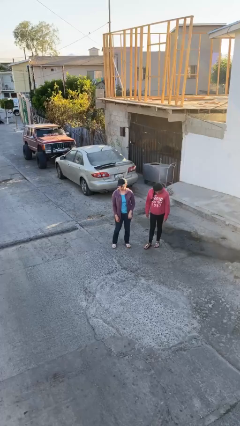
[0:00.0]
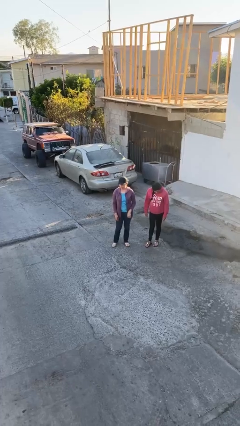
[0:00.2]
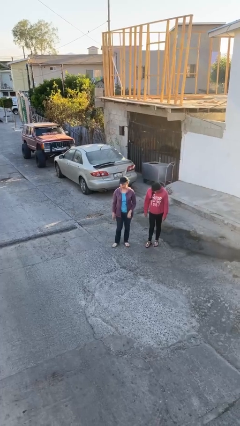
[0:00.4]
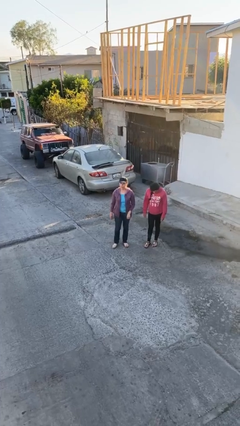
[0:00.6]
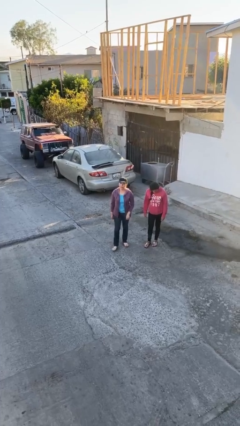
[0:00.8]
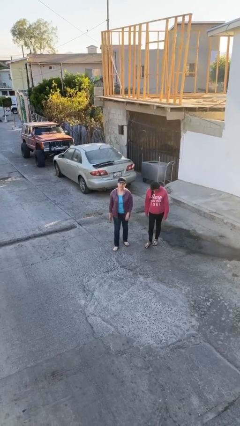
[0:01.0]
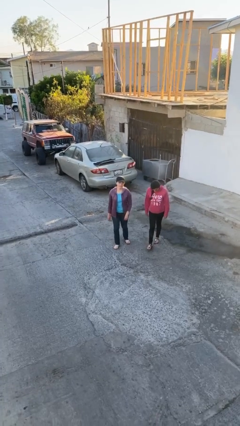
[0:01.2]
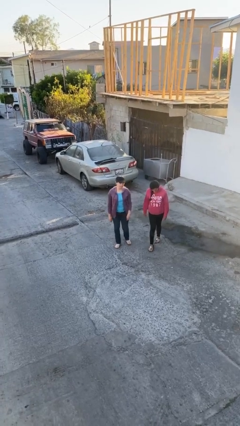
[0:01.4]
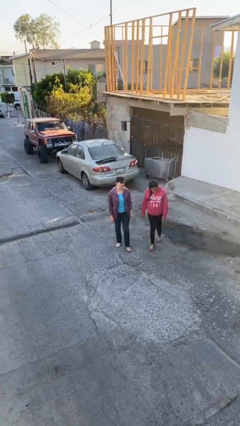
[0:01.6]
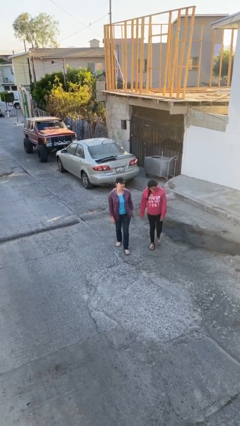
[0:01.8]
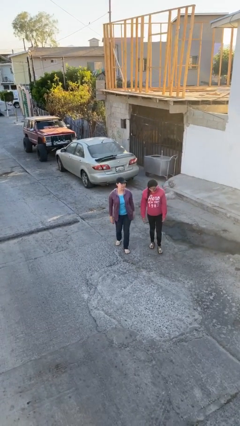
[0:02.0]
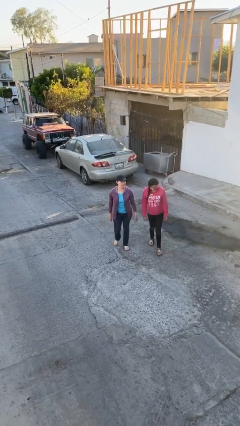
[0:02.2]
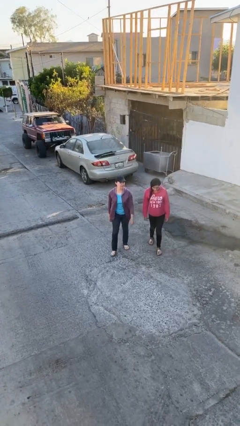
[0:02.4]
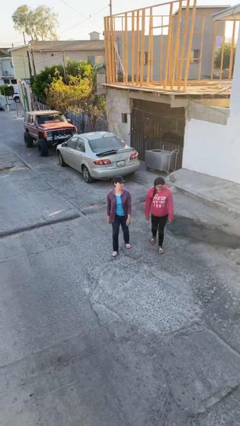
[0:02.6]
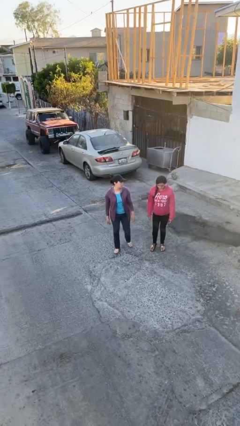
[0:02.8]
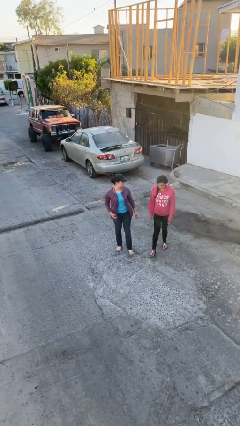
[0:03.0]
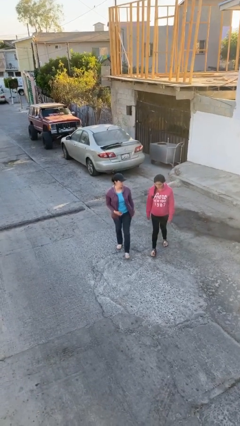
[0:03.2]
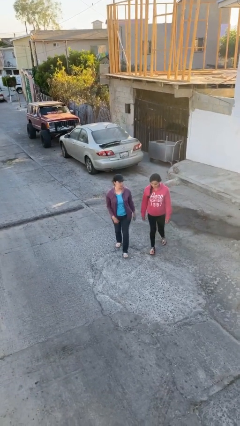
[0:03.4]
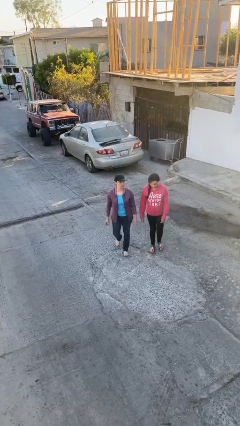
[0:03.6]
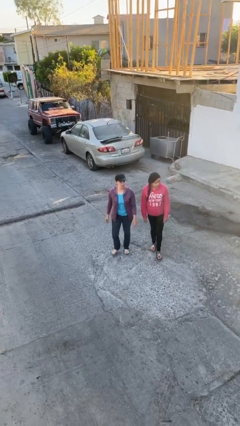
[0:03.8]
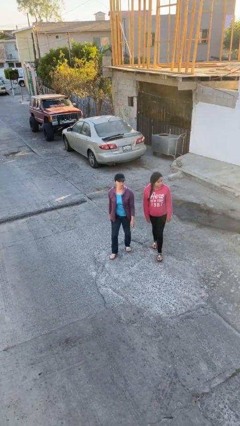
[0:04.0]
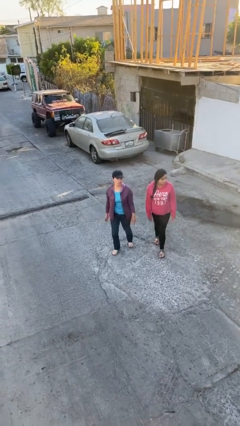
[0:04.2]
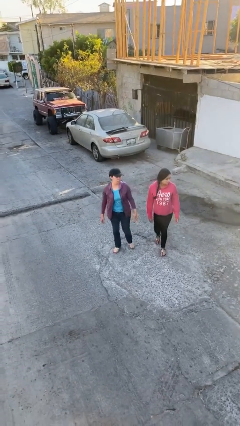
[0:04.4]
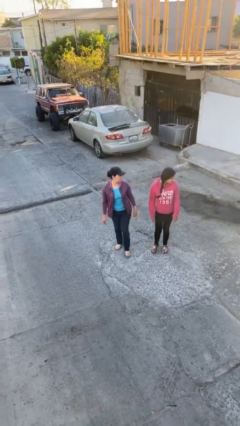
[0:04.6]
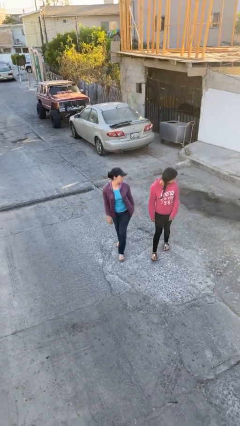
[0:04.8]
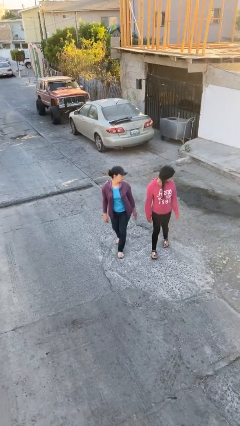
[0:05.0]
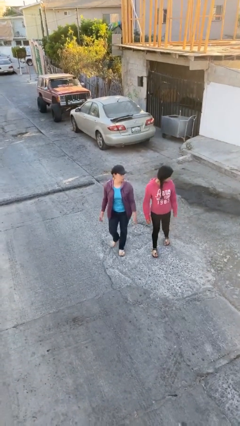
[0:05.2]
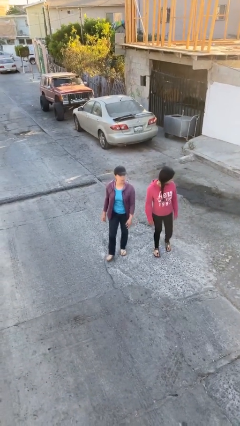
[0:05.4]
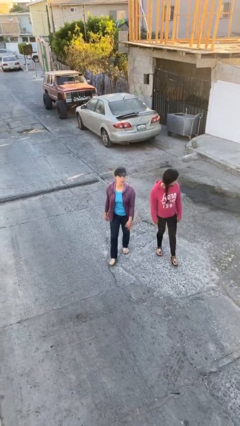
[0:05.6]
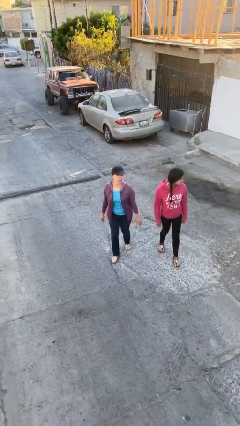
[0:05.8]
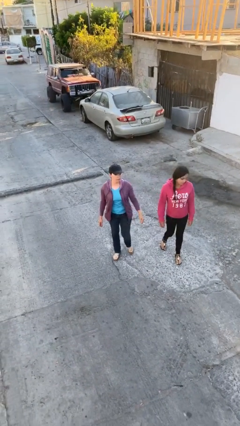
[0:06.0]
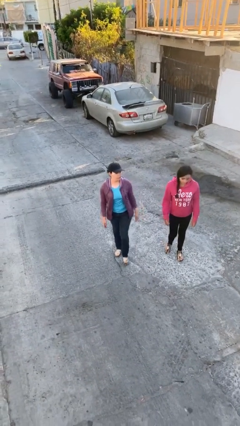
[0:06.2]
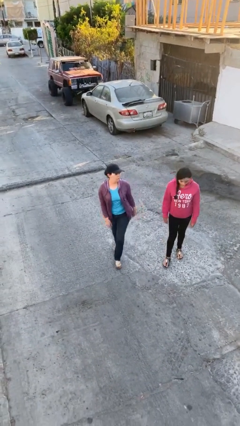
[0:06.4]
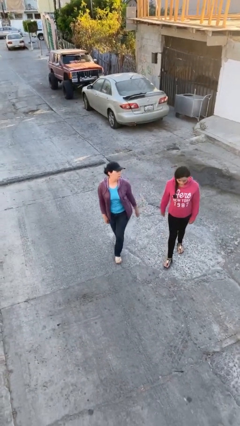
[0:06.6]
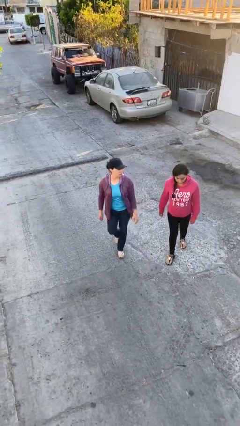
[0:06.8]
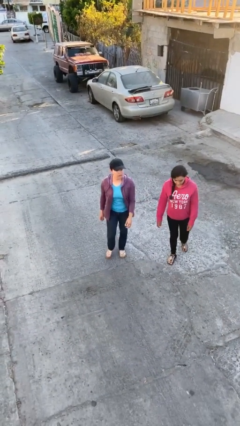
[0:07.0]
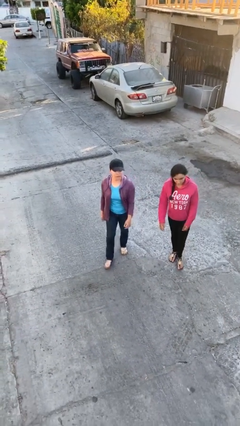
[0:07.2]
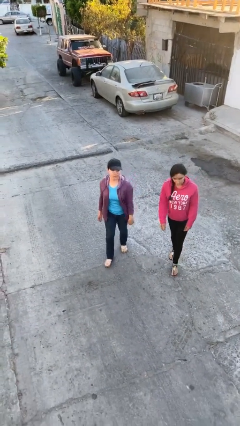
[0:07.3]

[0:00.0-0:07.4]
person talks to person

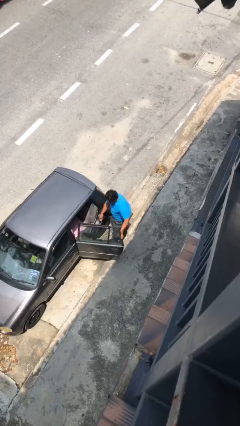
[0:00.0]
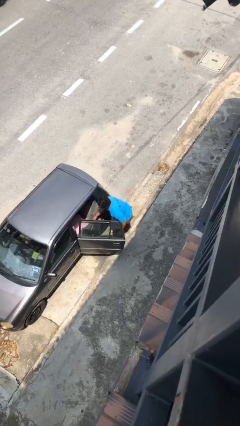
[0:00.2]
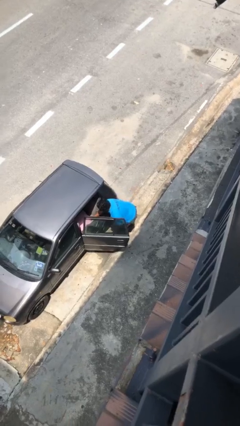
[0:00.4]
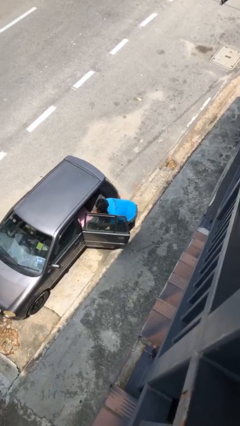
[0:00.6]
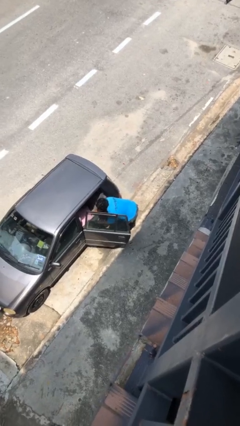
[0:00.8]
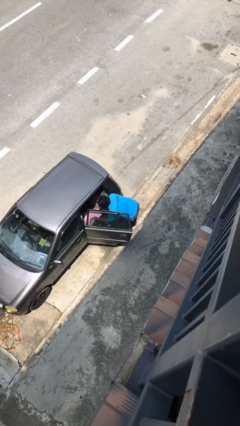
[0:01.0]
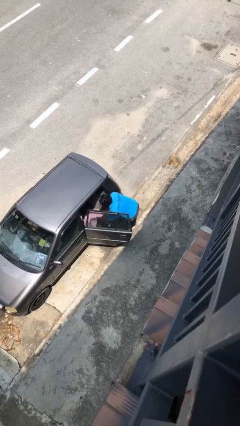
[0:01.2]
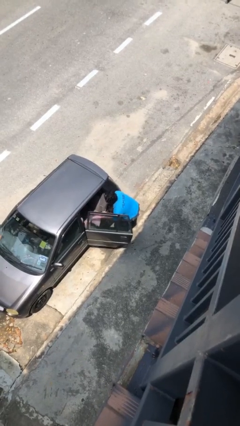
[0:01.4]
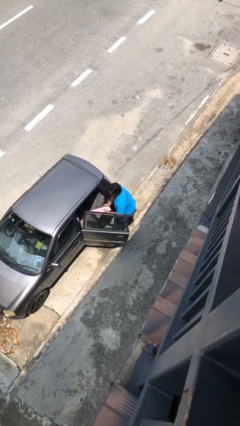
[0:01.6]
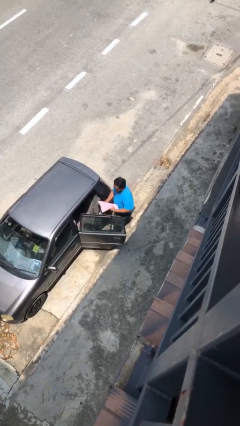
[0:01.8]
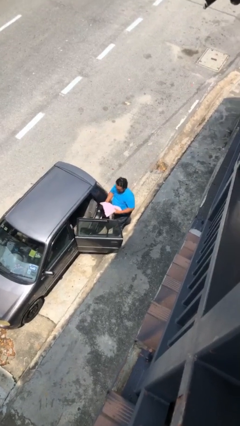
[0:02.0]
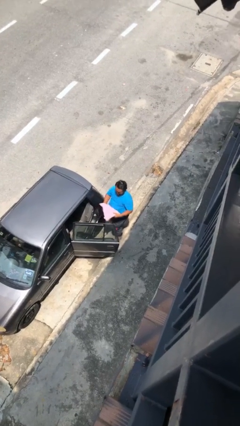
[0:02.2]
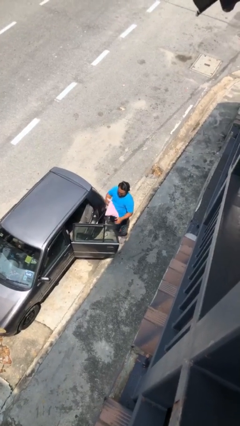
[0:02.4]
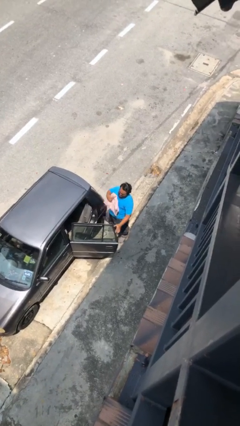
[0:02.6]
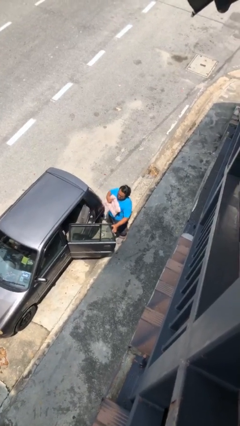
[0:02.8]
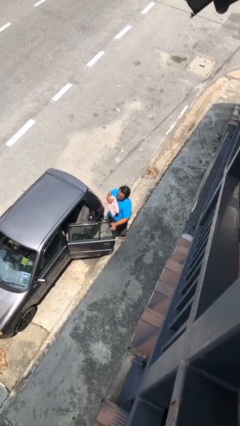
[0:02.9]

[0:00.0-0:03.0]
person unloads car

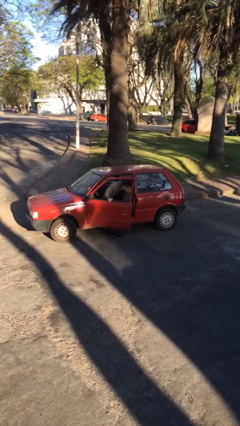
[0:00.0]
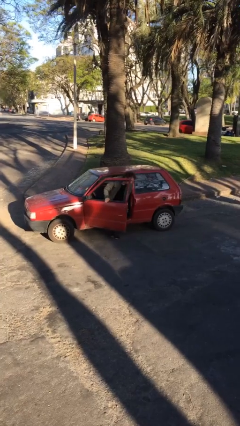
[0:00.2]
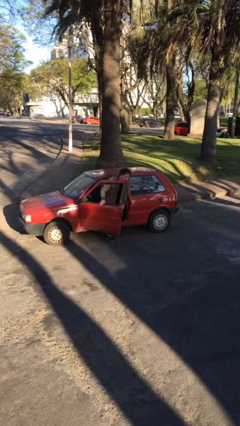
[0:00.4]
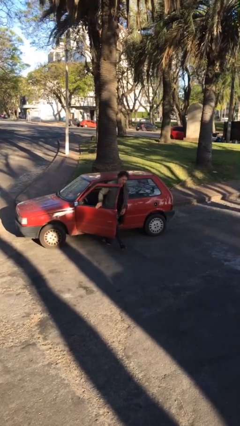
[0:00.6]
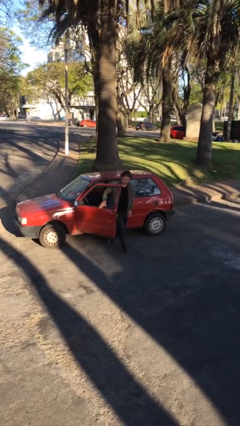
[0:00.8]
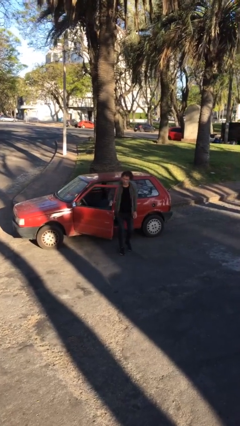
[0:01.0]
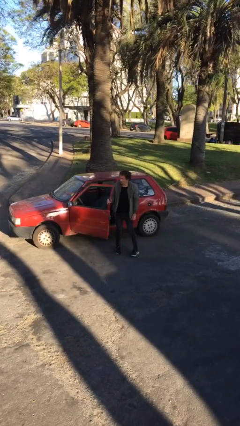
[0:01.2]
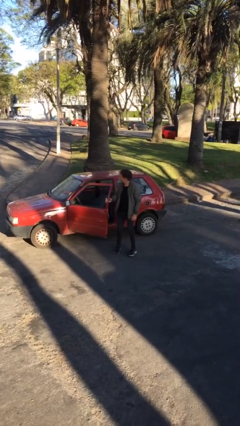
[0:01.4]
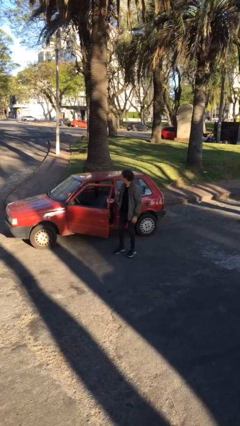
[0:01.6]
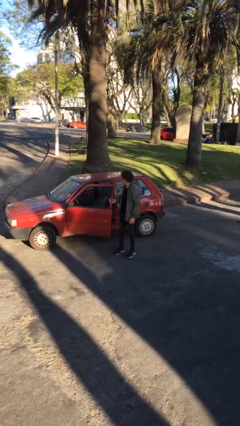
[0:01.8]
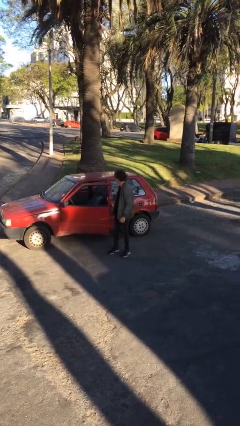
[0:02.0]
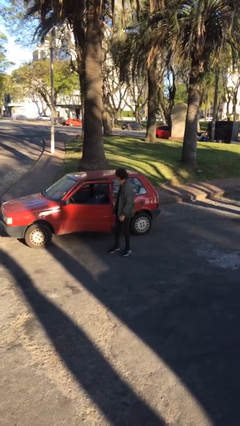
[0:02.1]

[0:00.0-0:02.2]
person exits car

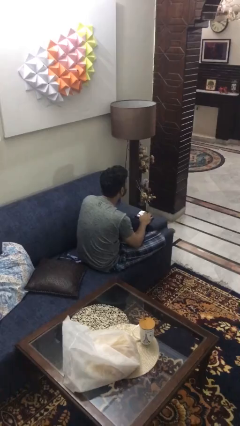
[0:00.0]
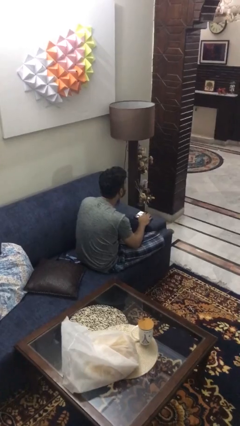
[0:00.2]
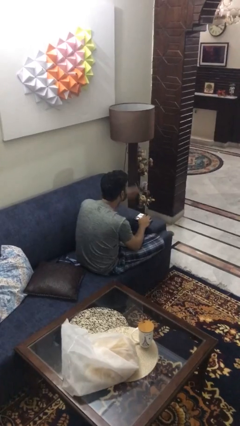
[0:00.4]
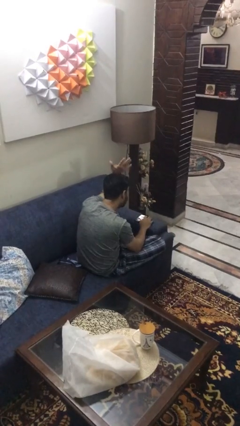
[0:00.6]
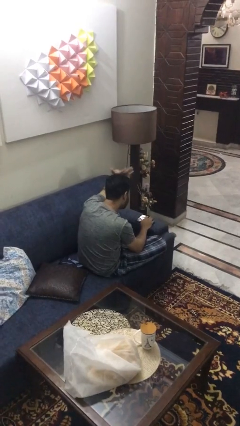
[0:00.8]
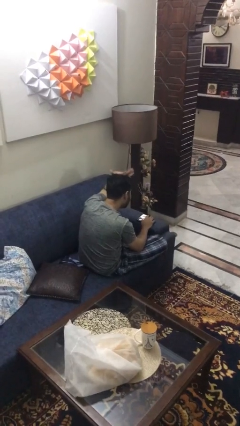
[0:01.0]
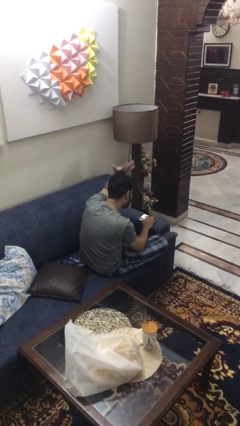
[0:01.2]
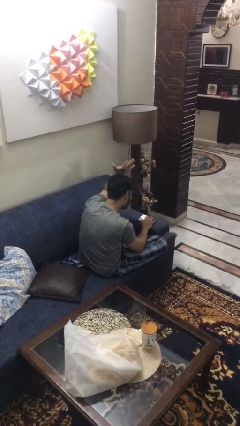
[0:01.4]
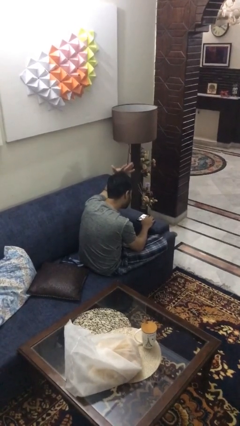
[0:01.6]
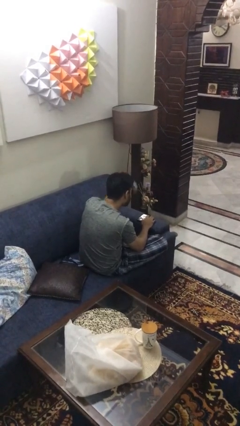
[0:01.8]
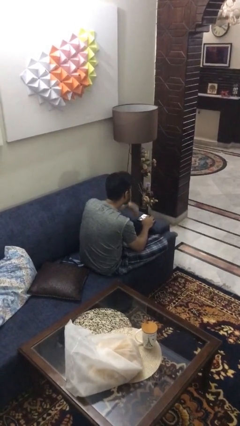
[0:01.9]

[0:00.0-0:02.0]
person pats head

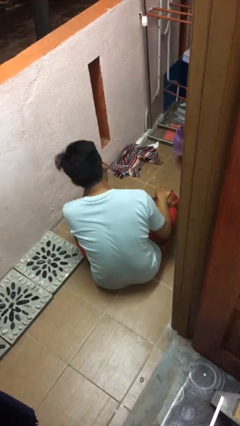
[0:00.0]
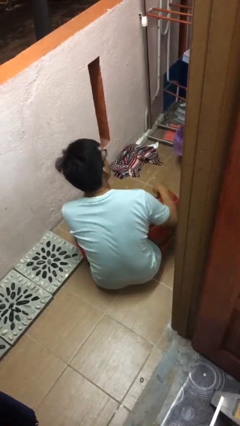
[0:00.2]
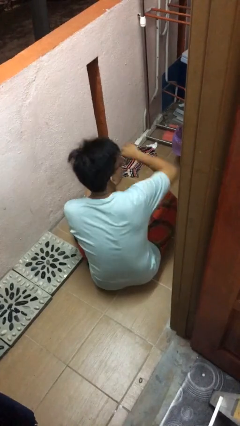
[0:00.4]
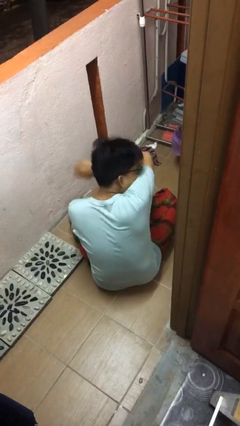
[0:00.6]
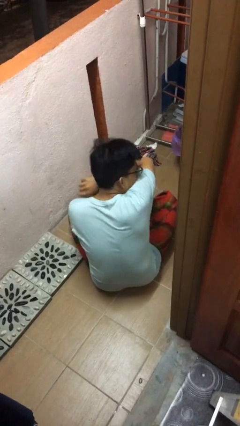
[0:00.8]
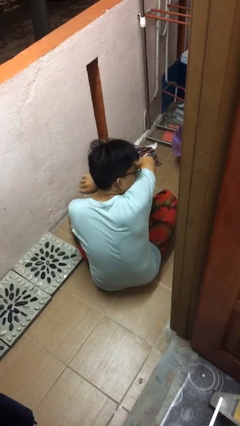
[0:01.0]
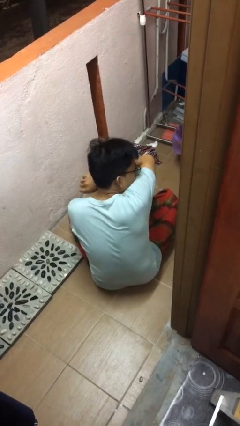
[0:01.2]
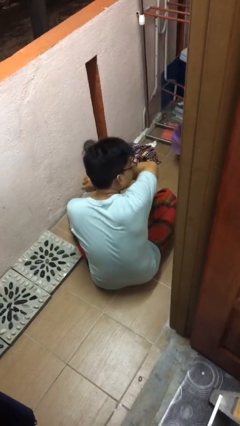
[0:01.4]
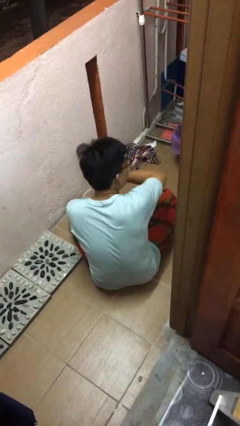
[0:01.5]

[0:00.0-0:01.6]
person sneezes into arm

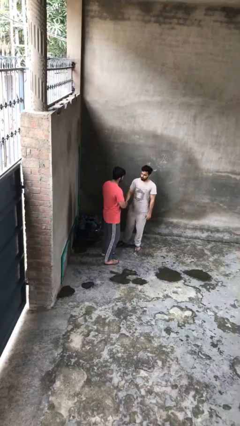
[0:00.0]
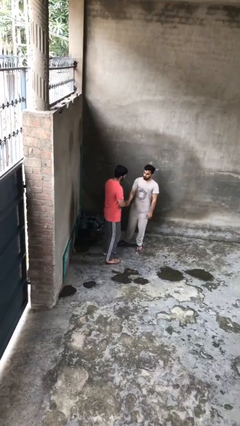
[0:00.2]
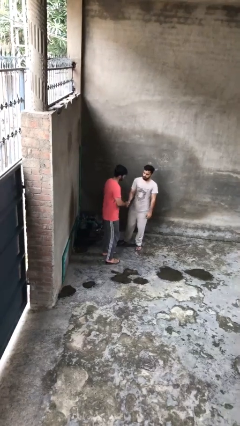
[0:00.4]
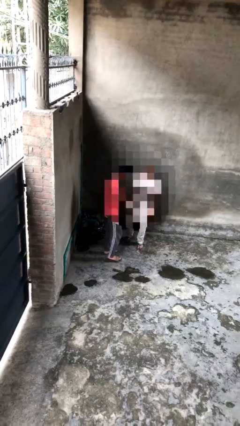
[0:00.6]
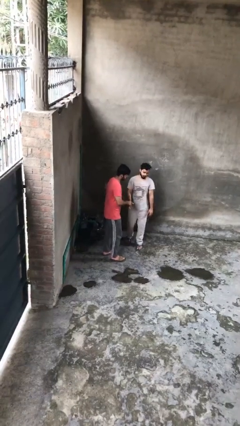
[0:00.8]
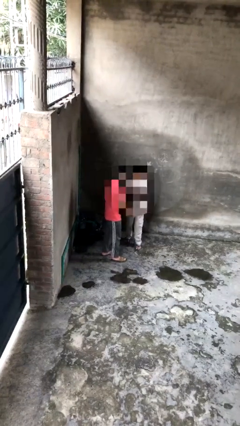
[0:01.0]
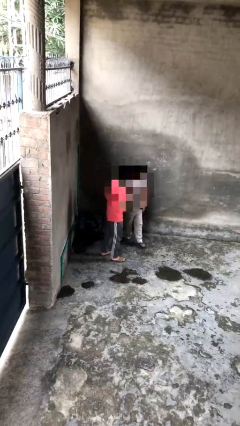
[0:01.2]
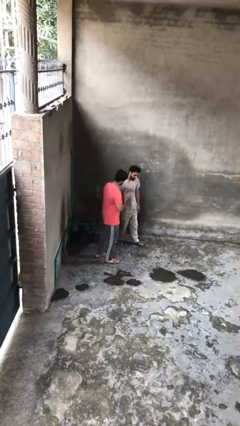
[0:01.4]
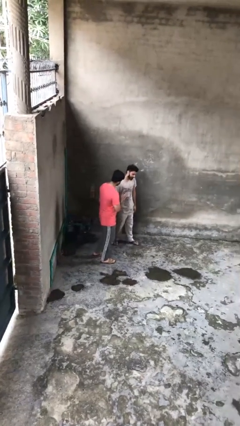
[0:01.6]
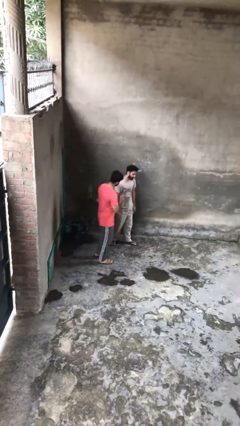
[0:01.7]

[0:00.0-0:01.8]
person shakes hand
